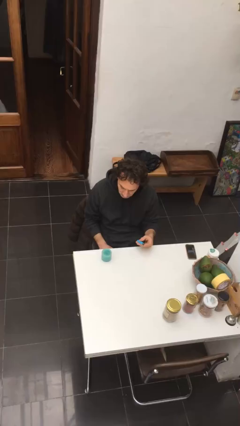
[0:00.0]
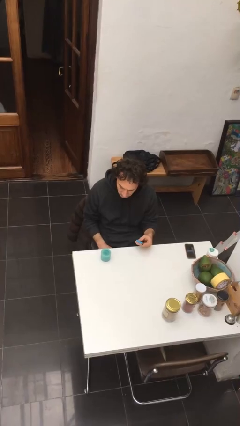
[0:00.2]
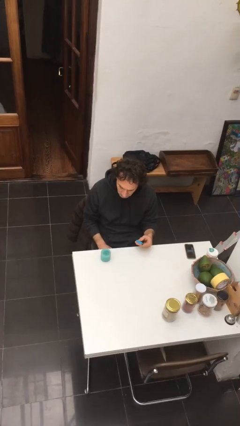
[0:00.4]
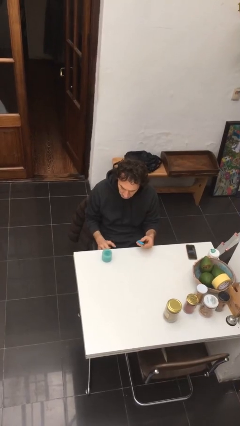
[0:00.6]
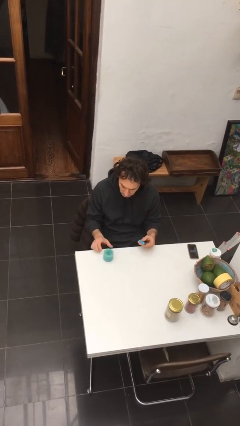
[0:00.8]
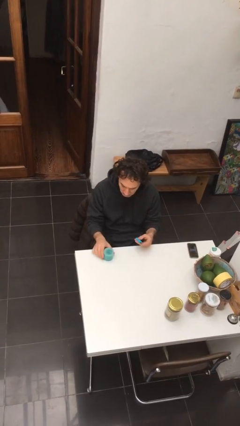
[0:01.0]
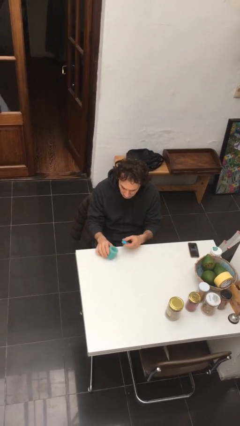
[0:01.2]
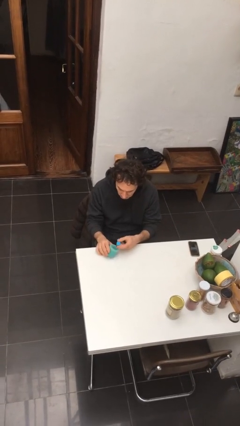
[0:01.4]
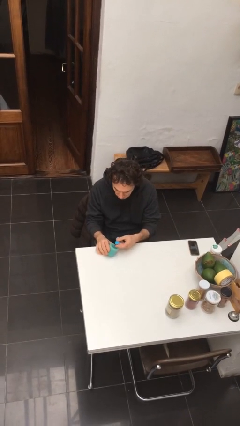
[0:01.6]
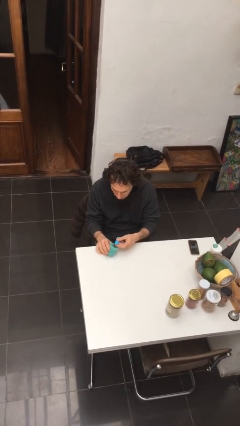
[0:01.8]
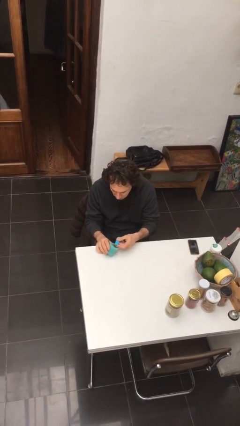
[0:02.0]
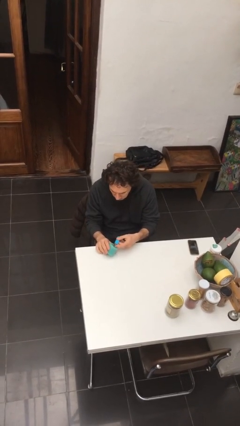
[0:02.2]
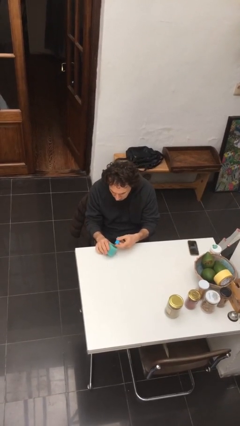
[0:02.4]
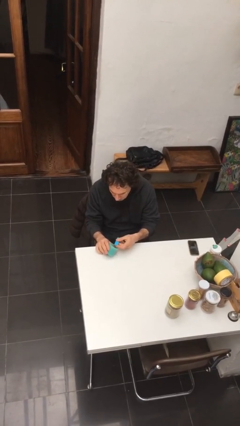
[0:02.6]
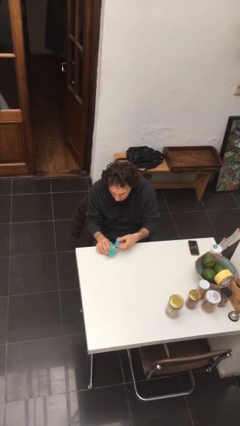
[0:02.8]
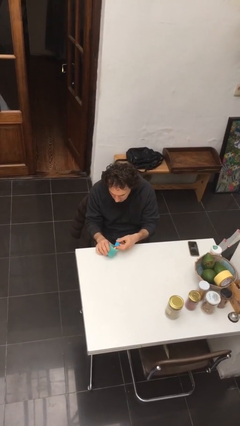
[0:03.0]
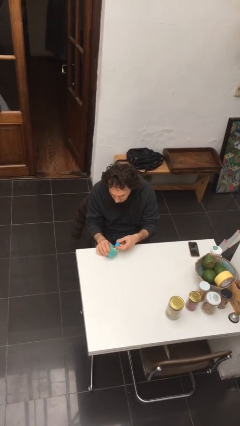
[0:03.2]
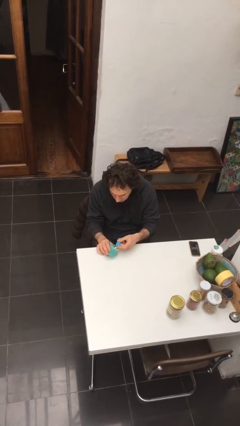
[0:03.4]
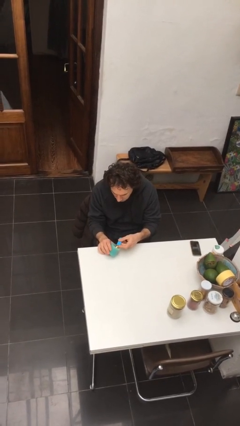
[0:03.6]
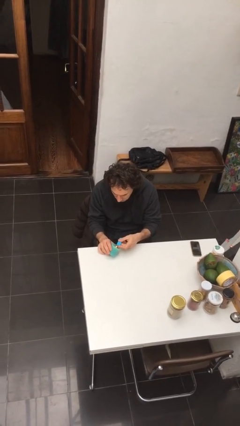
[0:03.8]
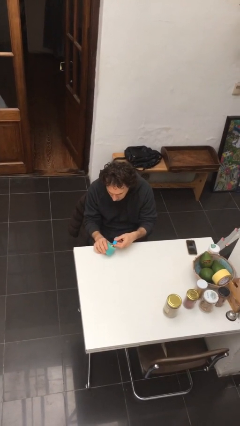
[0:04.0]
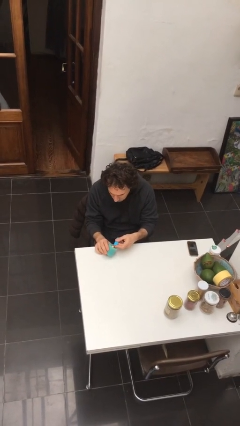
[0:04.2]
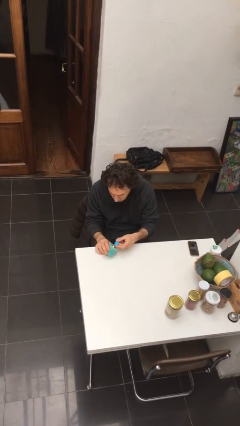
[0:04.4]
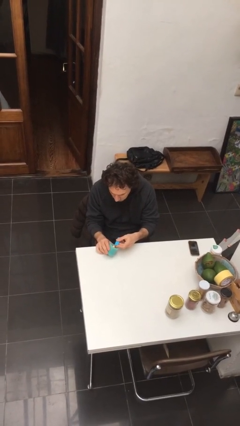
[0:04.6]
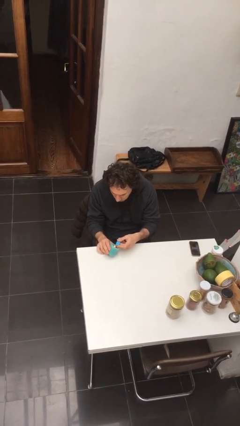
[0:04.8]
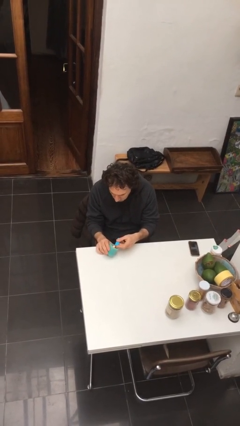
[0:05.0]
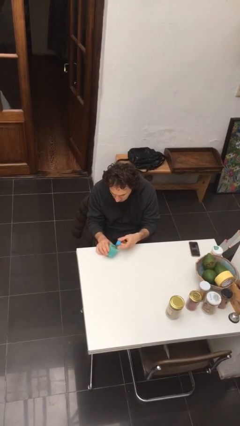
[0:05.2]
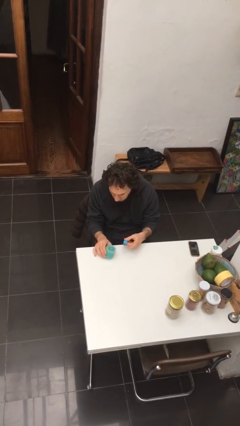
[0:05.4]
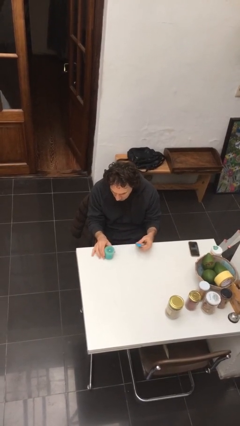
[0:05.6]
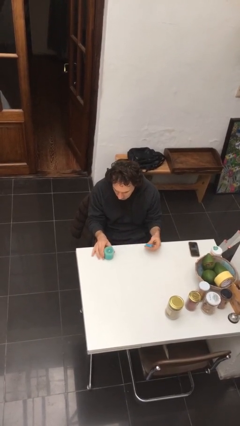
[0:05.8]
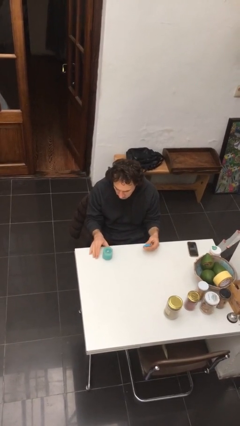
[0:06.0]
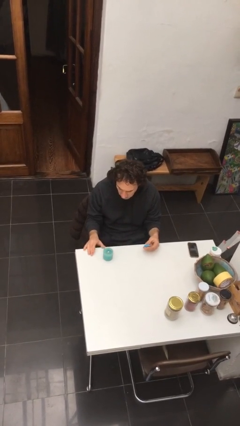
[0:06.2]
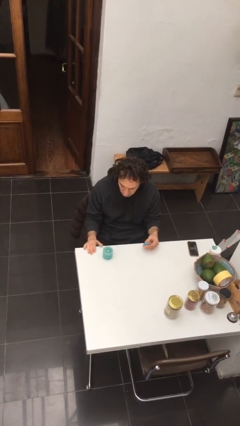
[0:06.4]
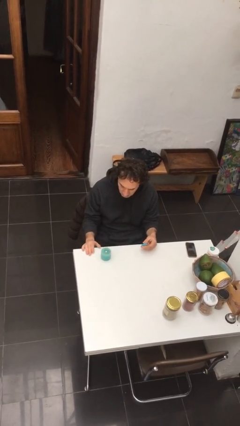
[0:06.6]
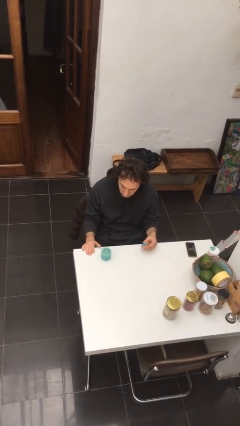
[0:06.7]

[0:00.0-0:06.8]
person lights candle

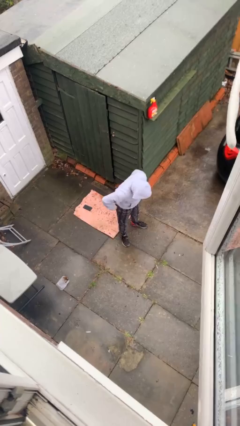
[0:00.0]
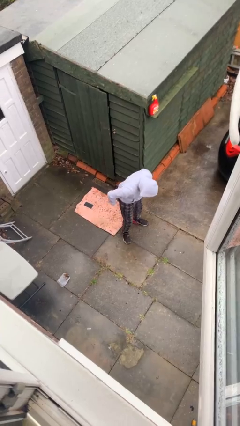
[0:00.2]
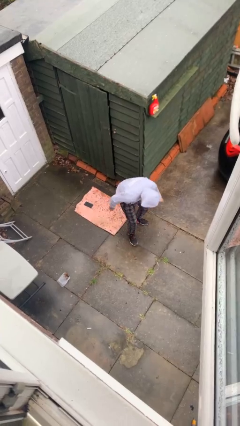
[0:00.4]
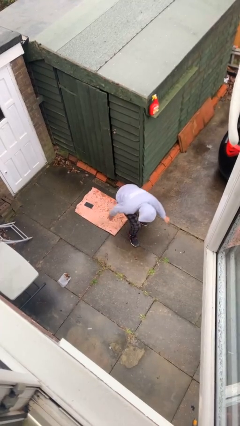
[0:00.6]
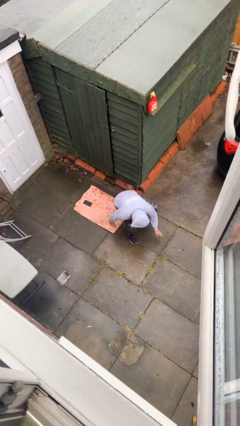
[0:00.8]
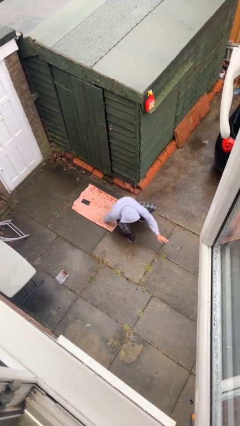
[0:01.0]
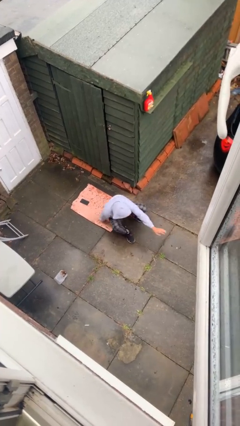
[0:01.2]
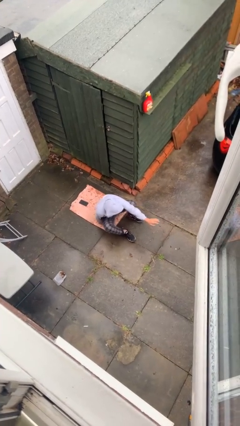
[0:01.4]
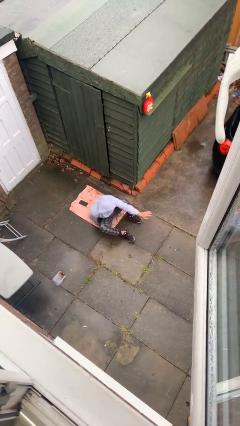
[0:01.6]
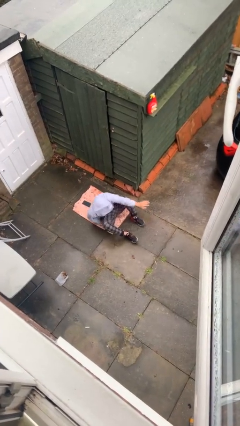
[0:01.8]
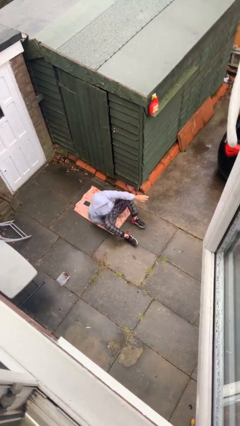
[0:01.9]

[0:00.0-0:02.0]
person sits down

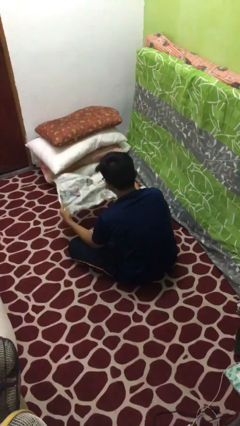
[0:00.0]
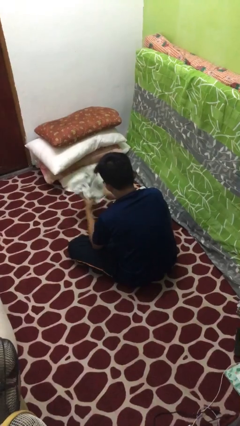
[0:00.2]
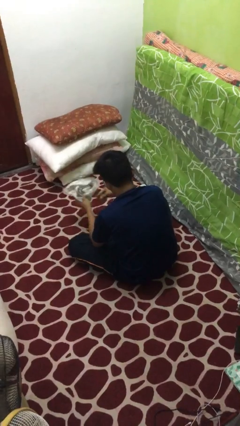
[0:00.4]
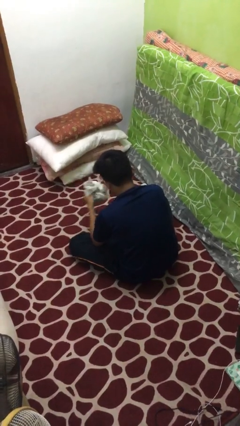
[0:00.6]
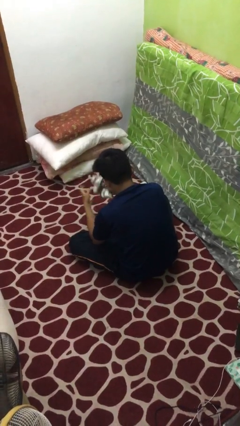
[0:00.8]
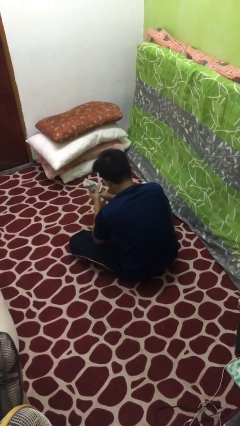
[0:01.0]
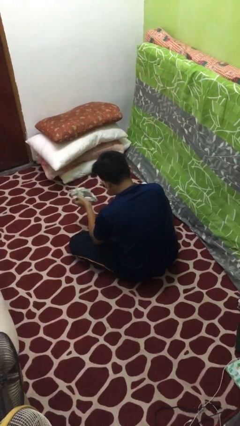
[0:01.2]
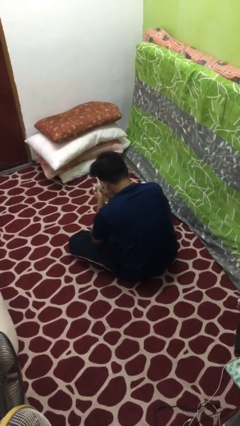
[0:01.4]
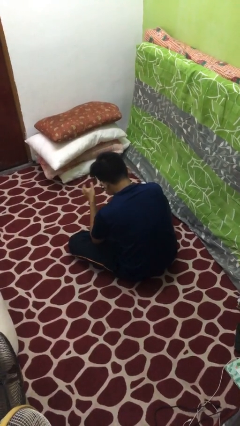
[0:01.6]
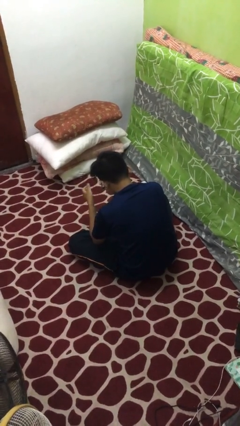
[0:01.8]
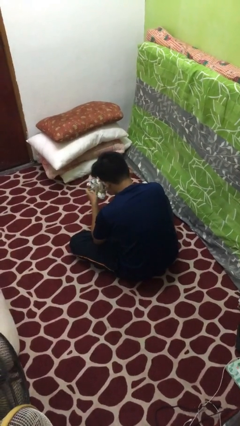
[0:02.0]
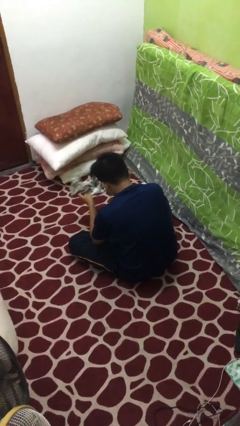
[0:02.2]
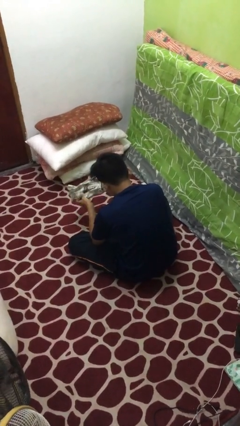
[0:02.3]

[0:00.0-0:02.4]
person crumples paper

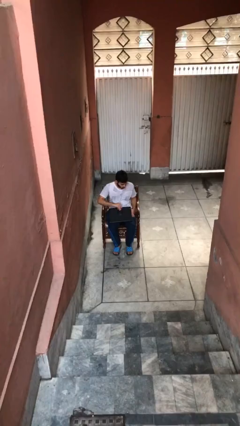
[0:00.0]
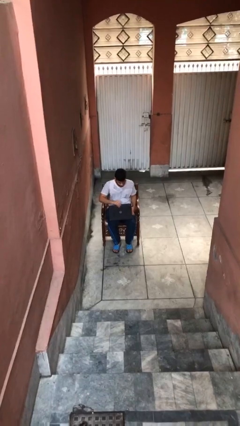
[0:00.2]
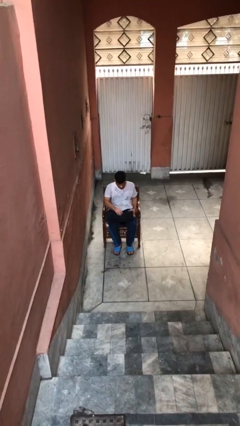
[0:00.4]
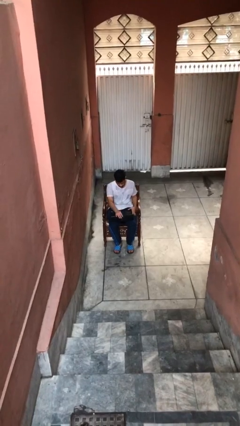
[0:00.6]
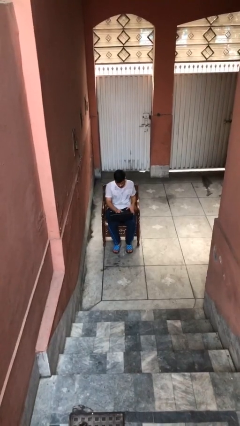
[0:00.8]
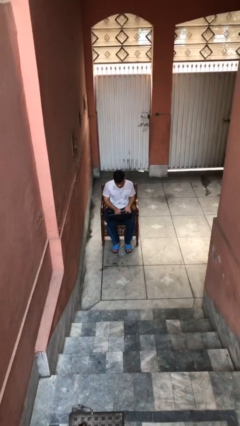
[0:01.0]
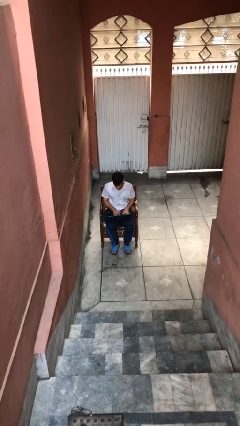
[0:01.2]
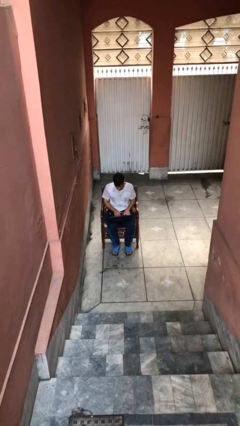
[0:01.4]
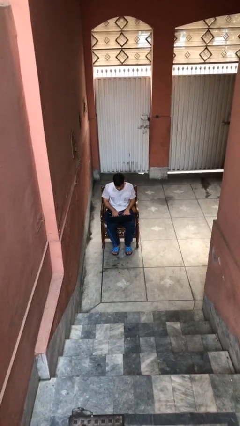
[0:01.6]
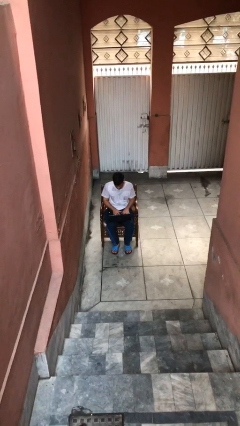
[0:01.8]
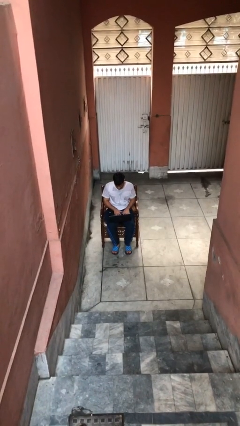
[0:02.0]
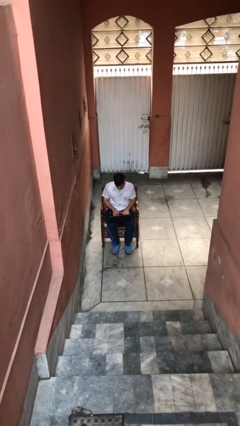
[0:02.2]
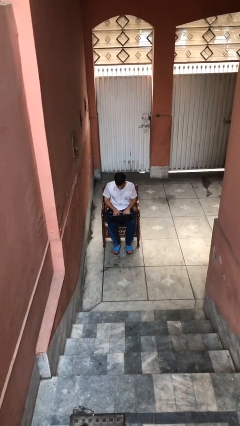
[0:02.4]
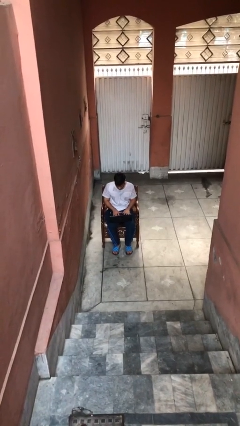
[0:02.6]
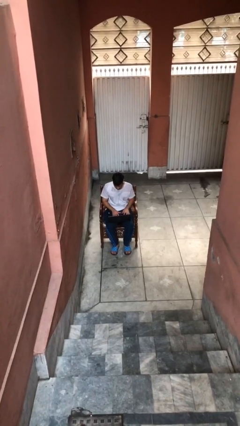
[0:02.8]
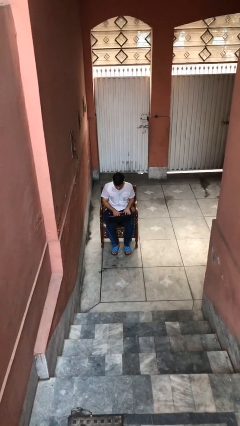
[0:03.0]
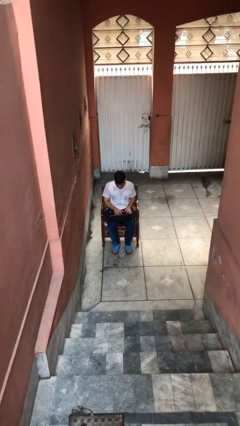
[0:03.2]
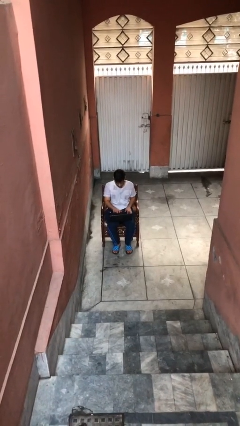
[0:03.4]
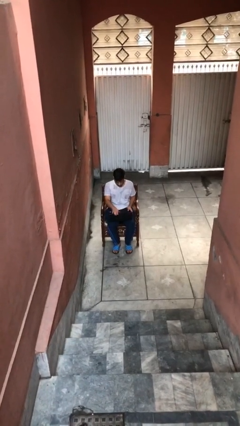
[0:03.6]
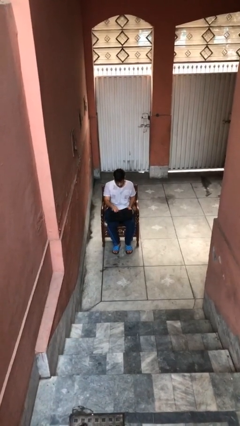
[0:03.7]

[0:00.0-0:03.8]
person interacts with laptop

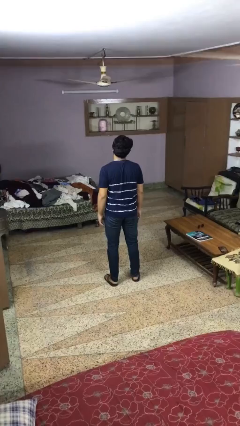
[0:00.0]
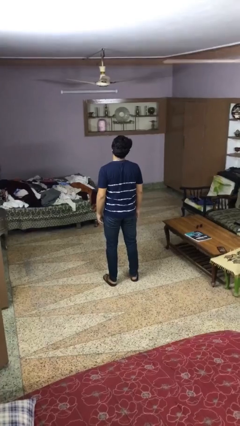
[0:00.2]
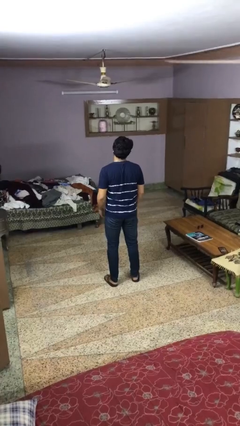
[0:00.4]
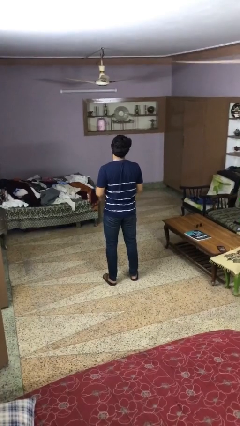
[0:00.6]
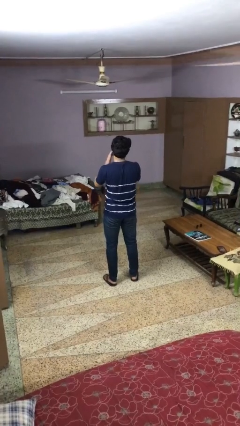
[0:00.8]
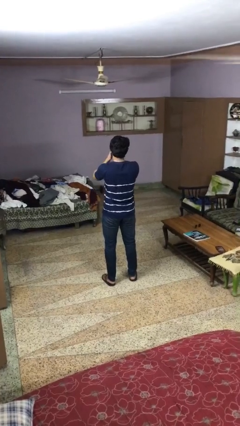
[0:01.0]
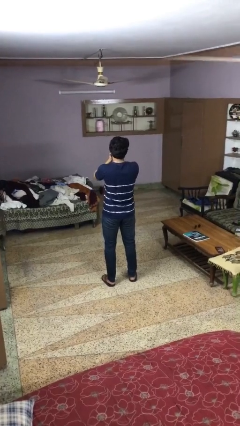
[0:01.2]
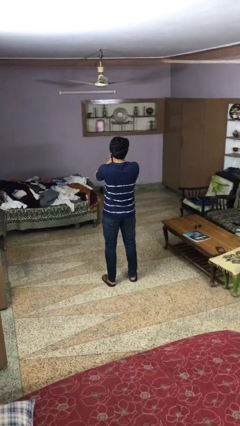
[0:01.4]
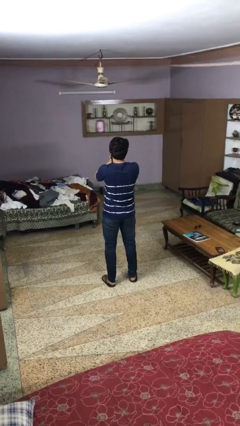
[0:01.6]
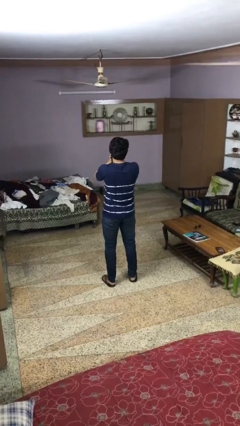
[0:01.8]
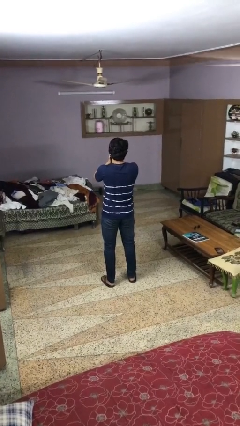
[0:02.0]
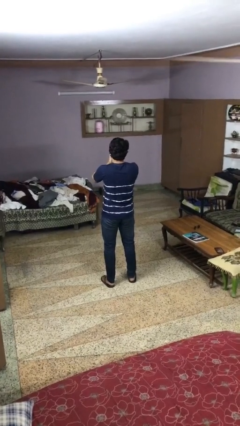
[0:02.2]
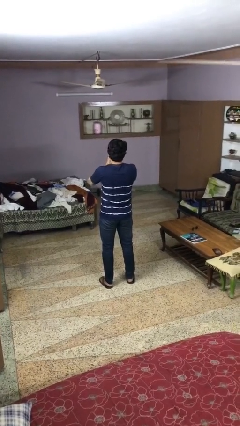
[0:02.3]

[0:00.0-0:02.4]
person covers face with hands

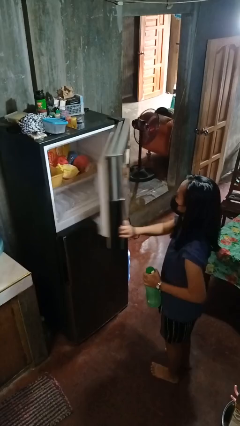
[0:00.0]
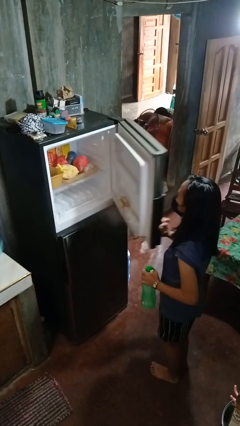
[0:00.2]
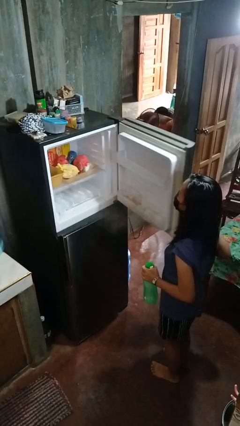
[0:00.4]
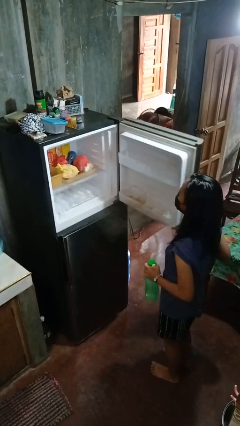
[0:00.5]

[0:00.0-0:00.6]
person opens refrigerator
